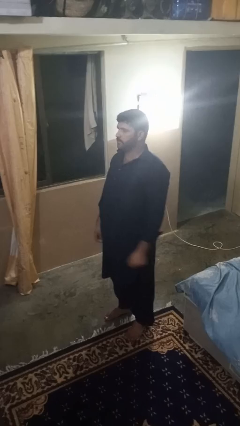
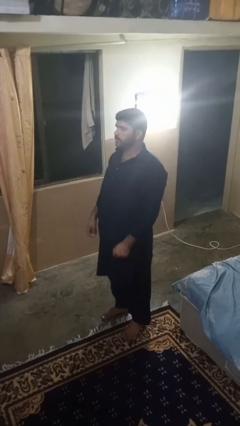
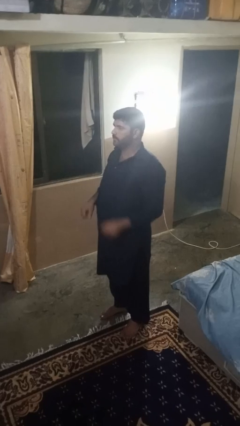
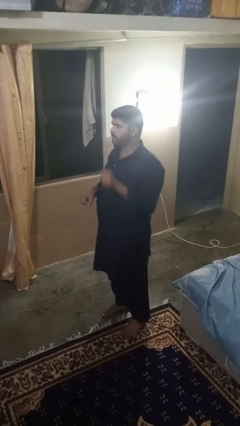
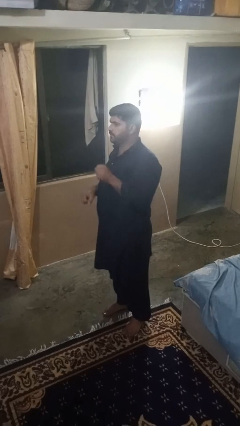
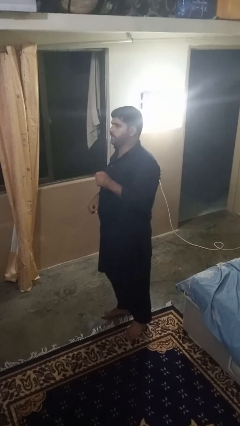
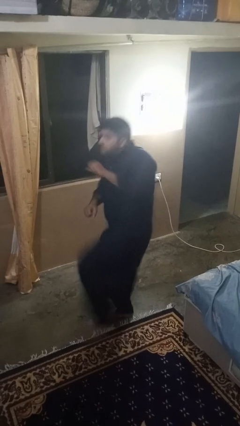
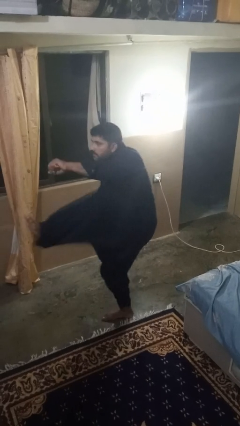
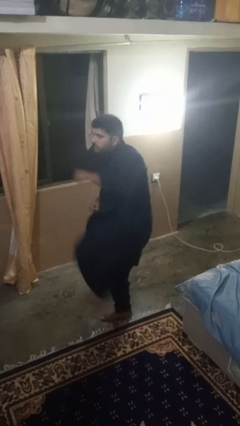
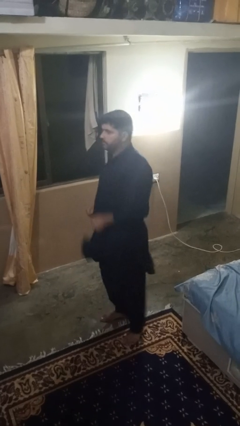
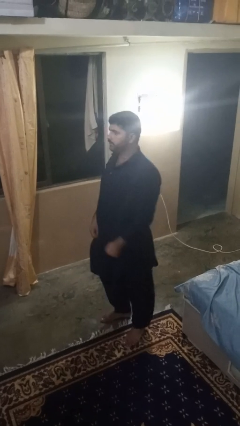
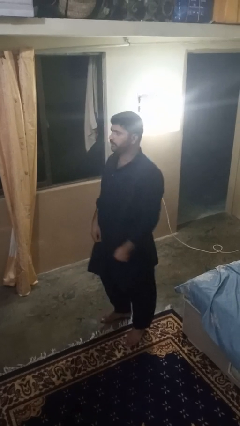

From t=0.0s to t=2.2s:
person karate kicks

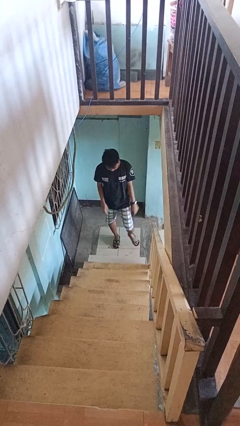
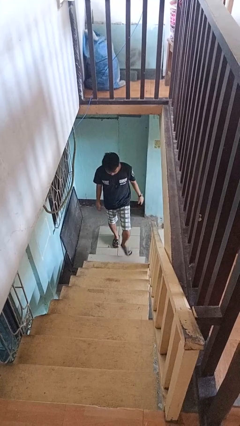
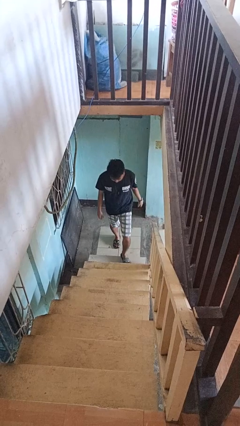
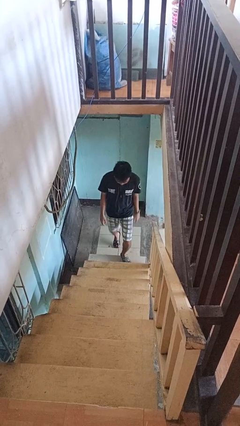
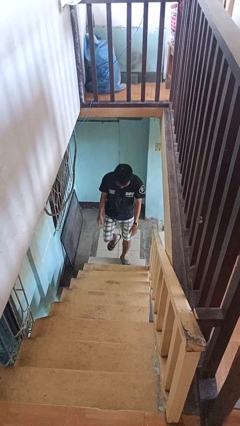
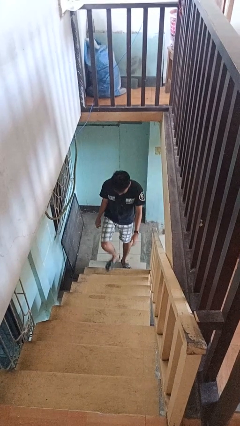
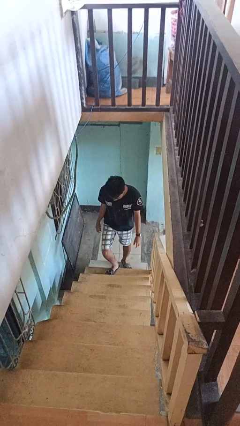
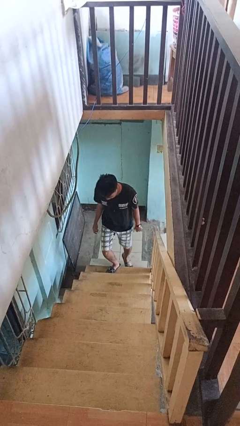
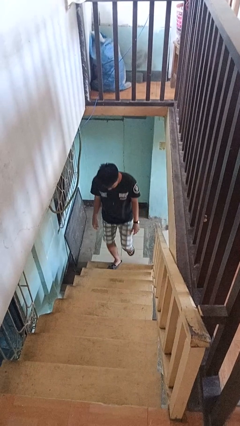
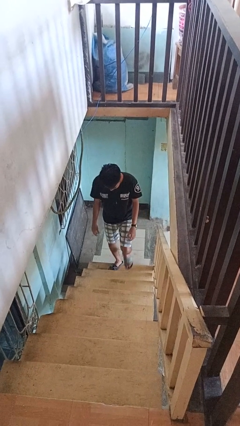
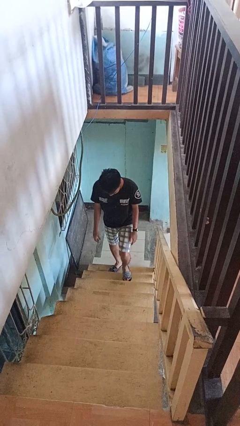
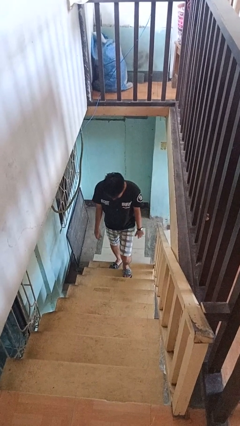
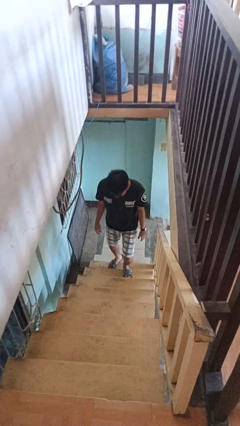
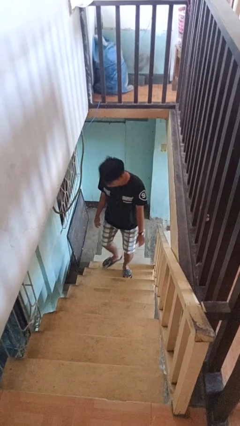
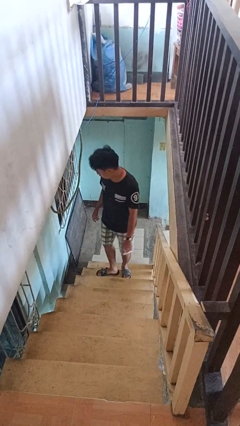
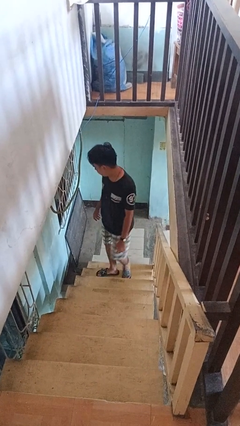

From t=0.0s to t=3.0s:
person climbs up ladder

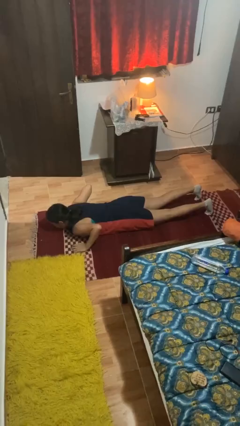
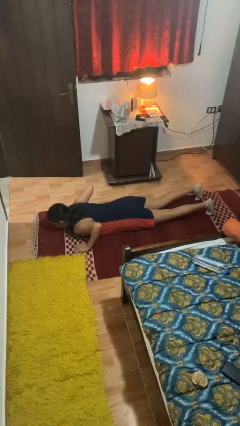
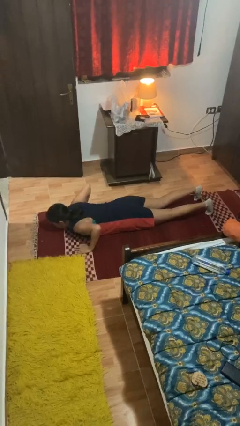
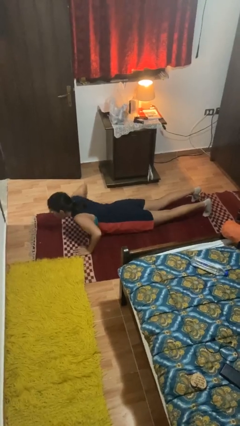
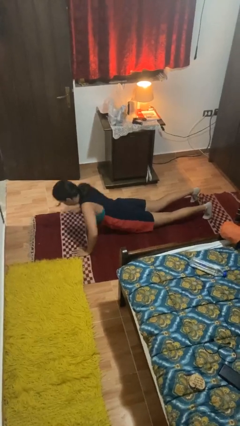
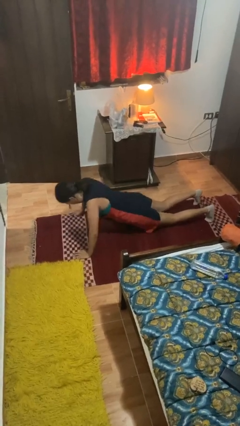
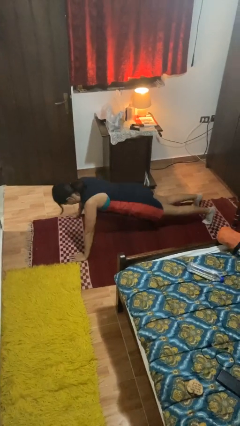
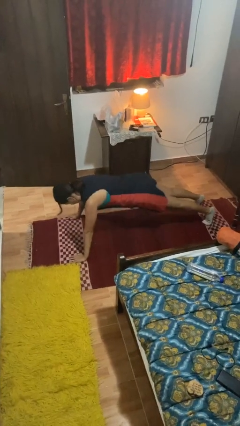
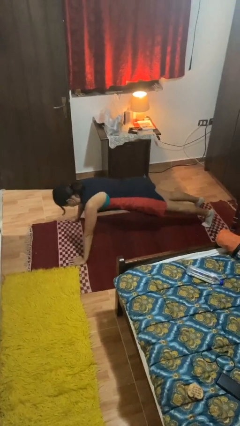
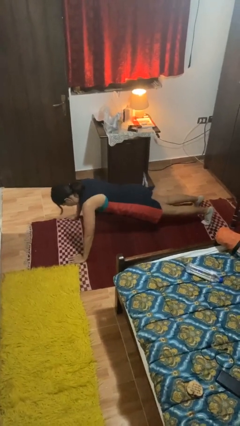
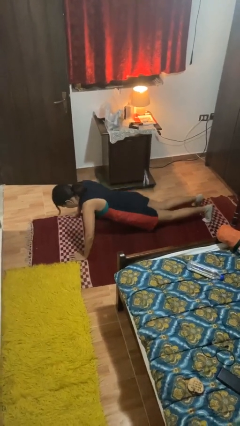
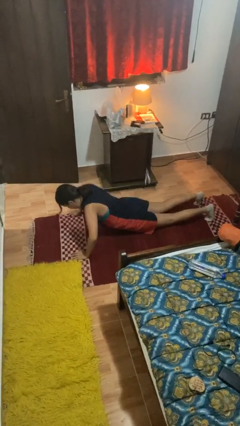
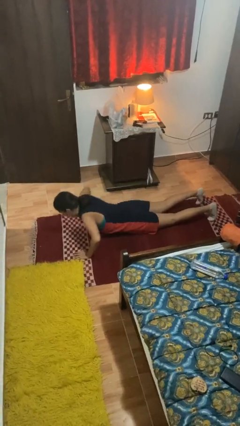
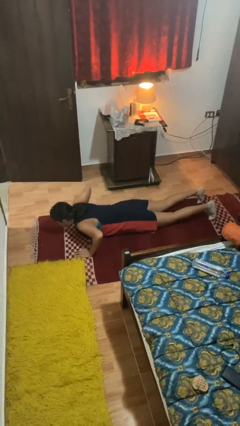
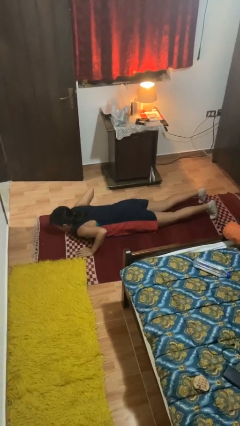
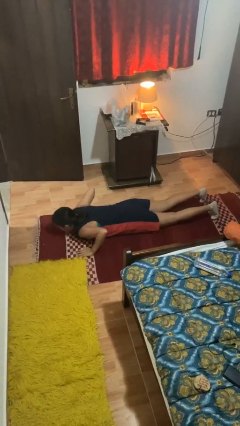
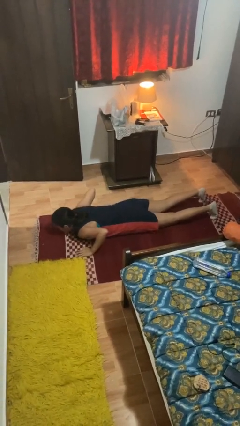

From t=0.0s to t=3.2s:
person exercises with pushup

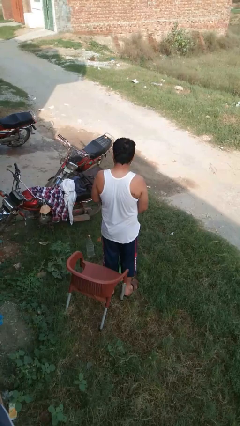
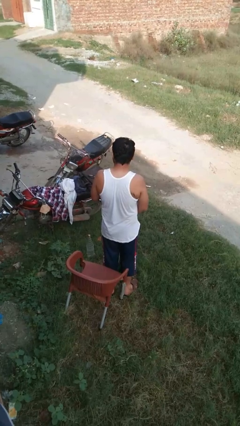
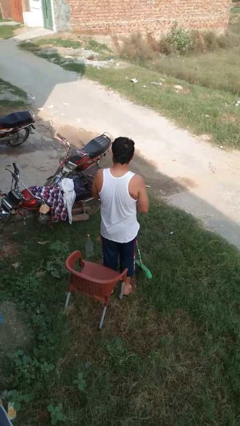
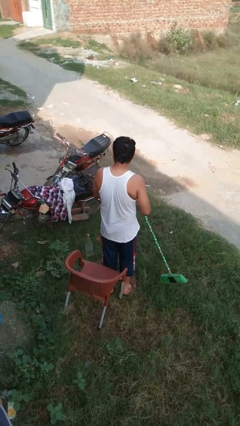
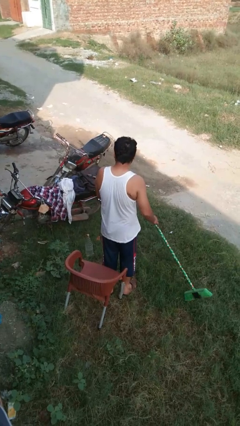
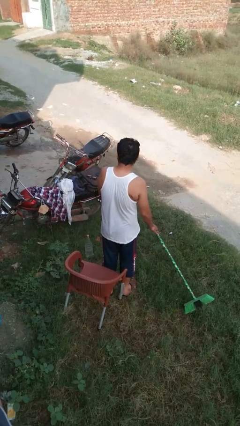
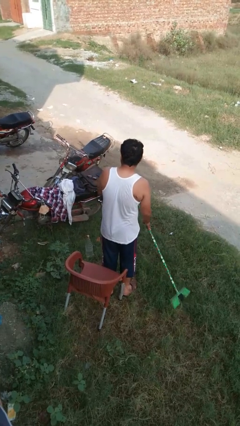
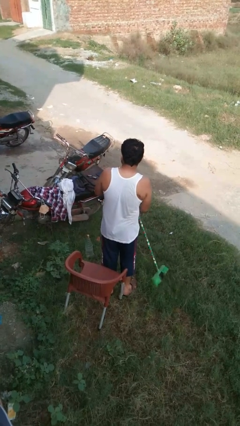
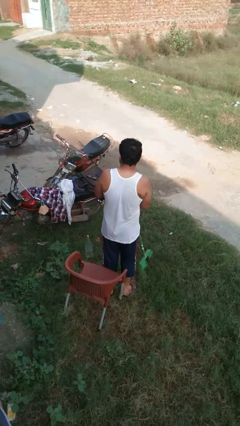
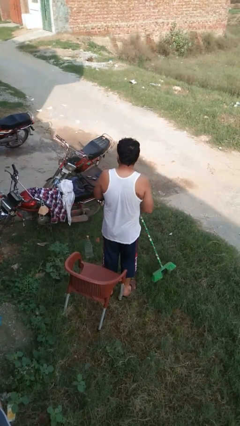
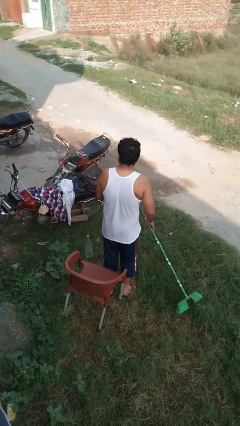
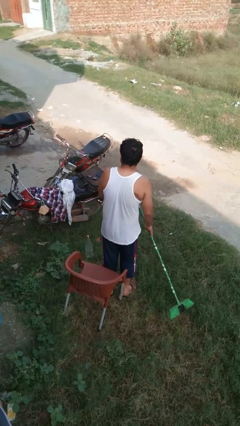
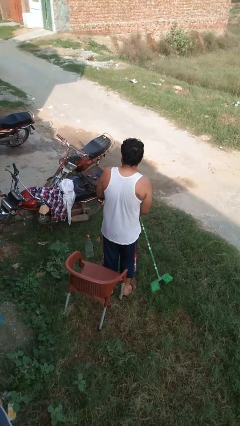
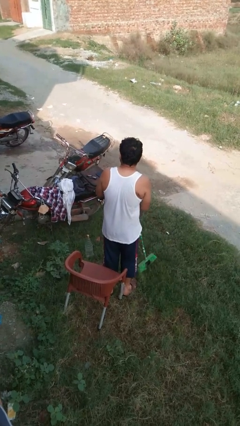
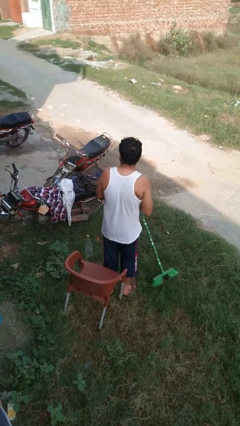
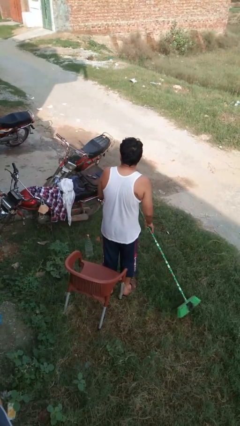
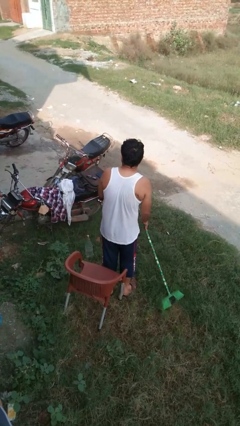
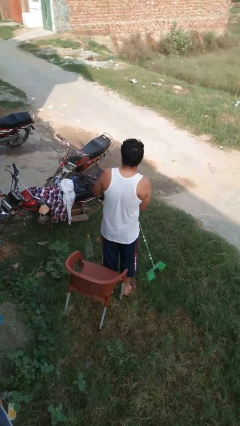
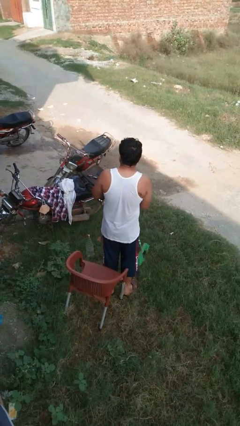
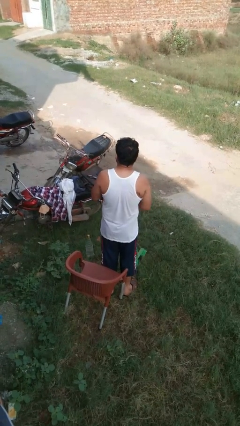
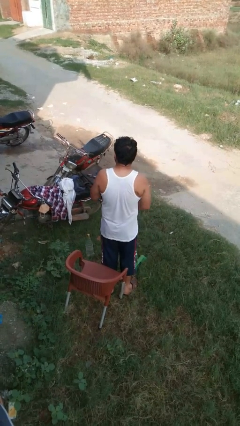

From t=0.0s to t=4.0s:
person sweeps floor

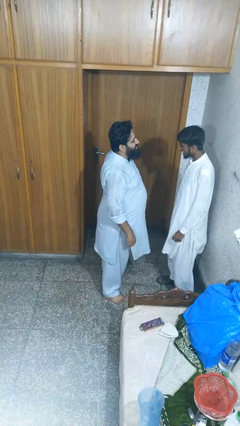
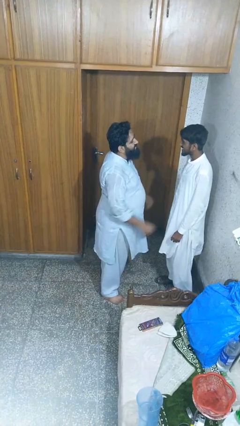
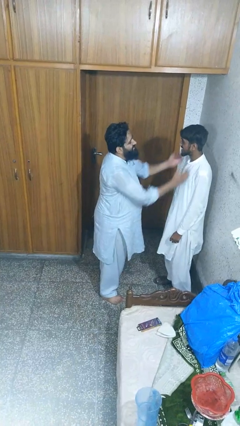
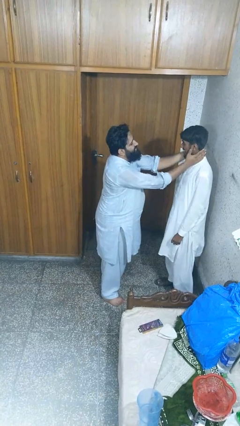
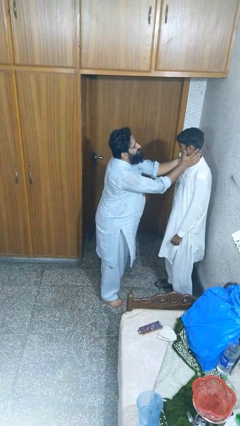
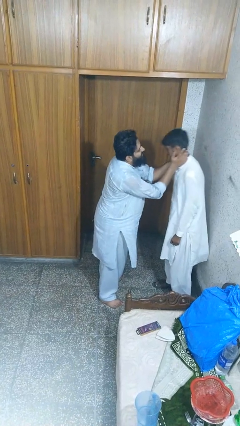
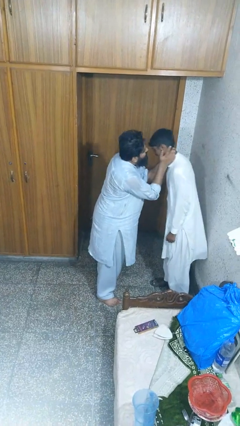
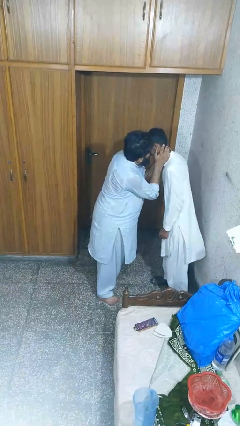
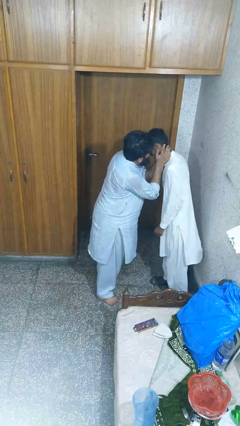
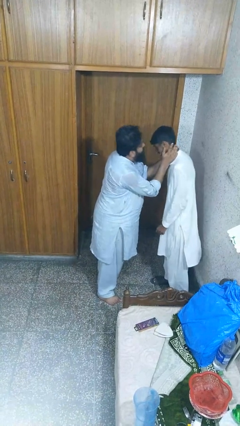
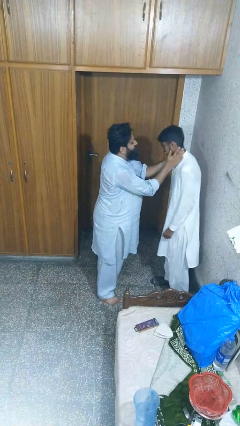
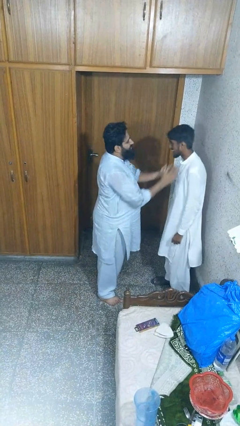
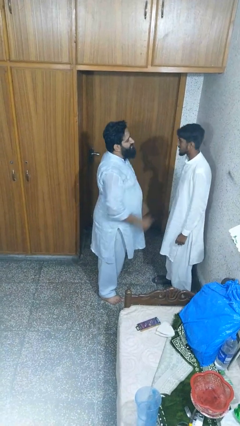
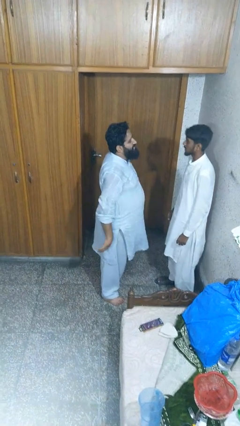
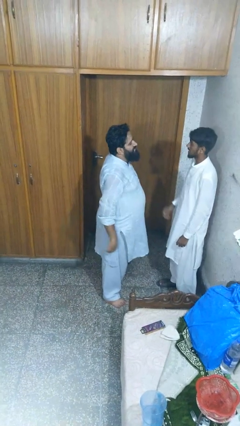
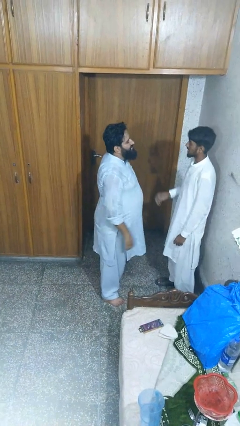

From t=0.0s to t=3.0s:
person kisses cheek of person

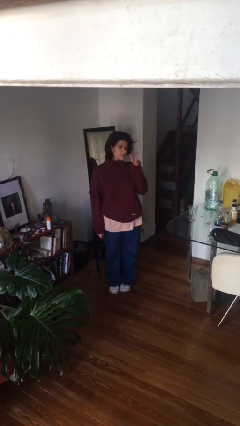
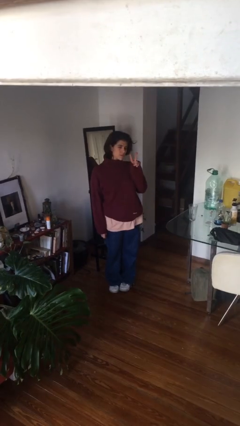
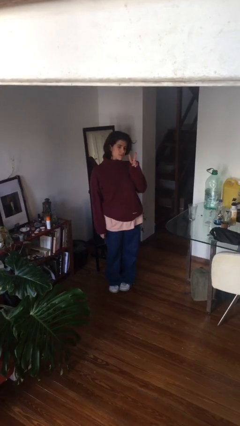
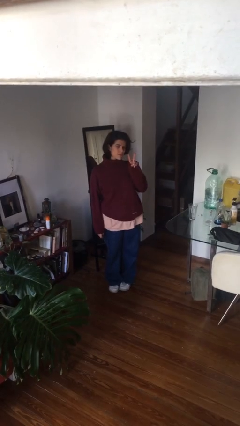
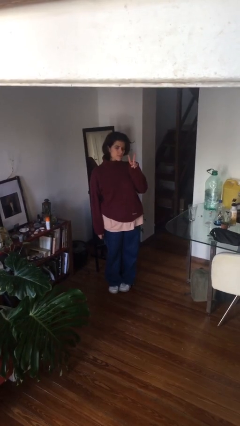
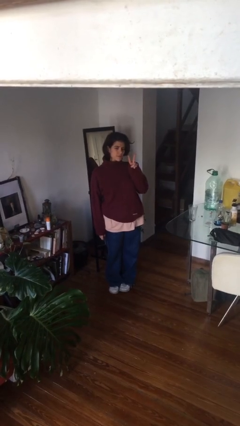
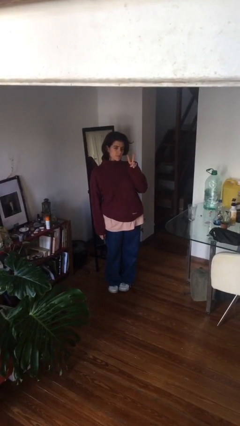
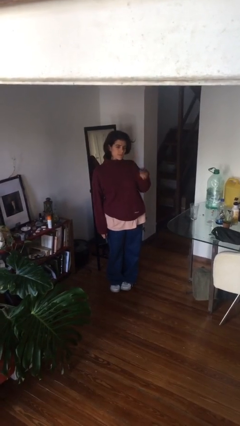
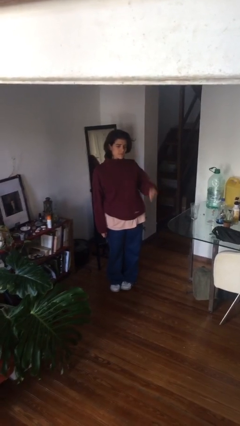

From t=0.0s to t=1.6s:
person gestures peace
